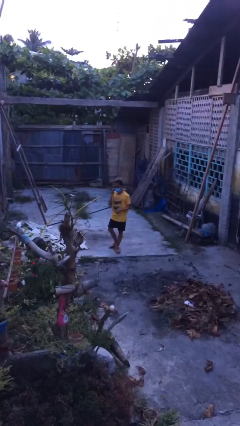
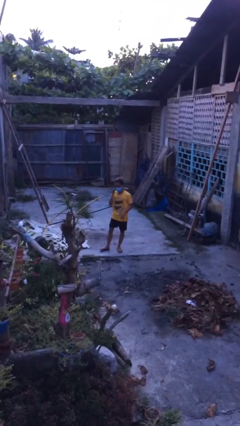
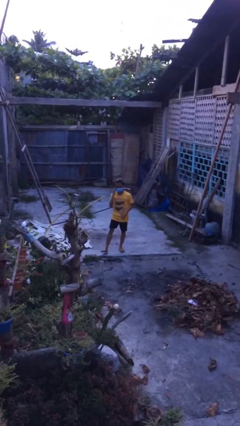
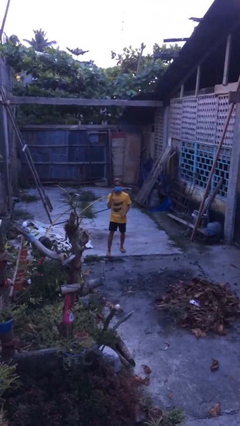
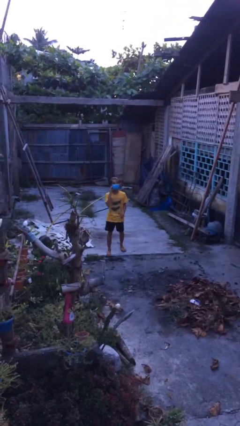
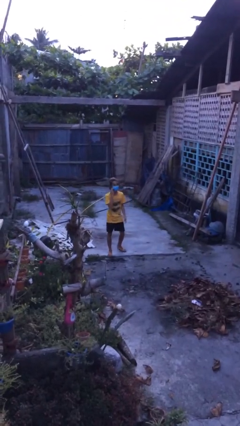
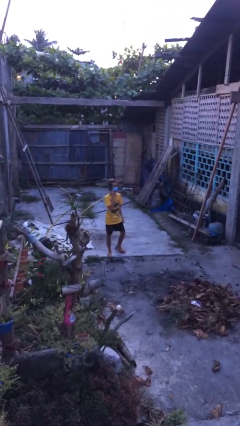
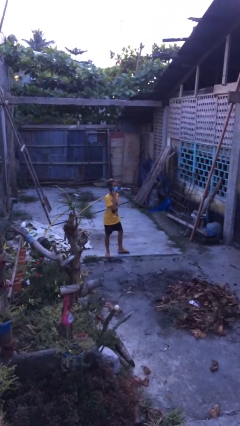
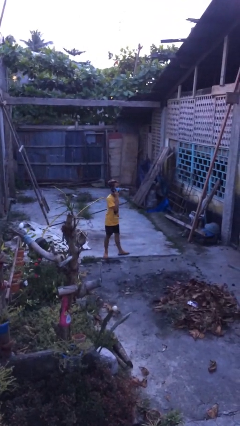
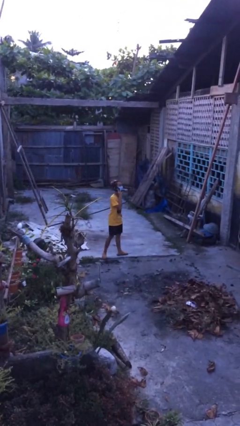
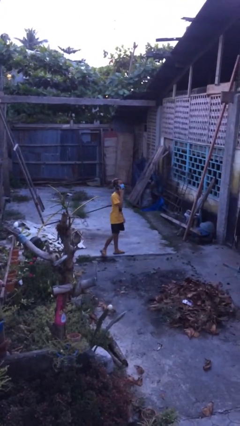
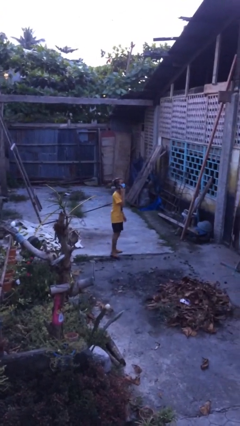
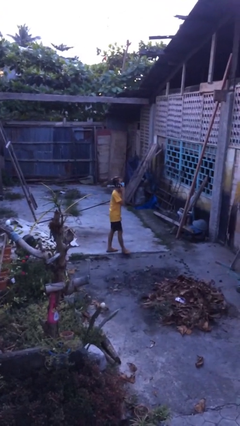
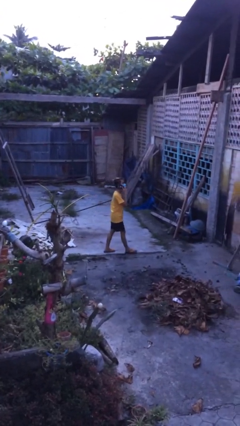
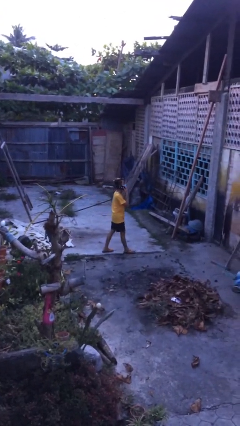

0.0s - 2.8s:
person talks on phone

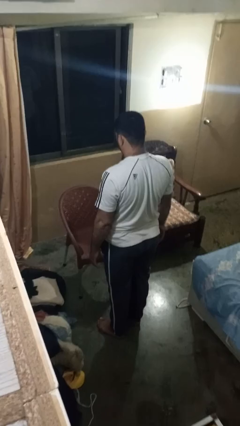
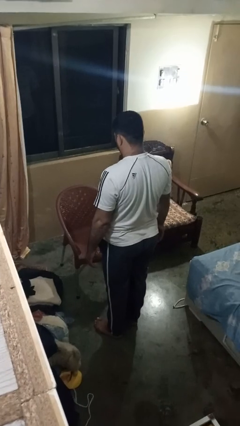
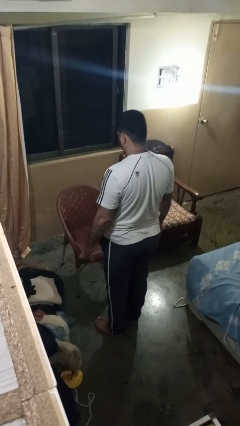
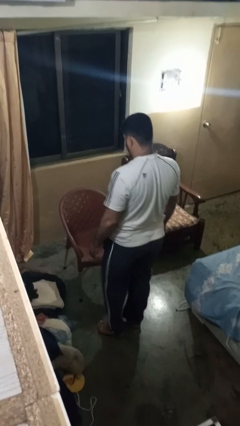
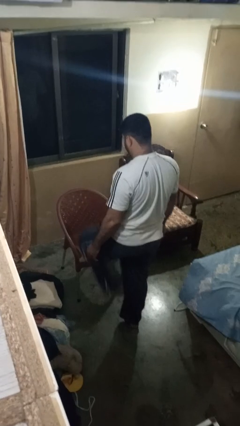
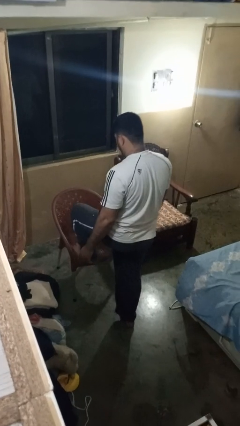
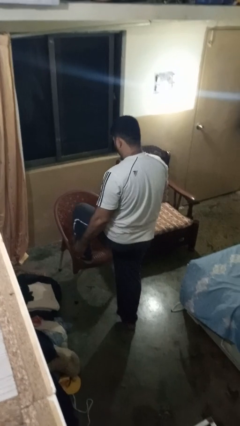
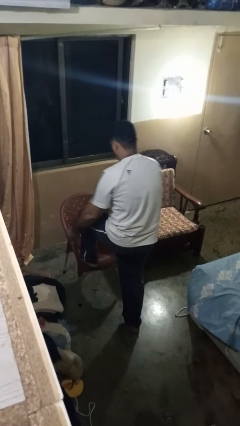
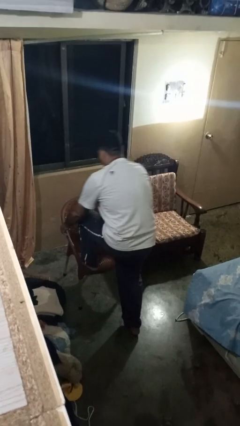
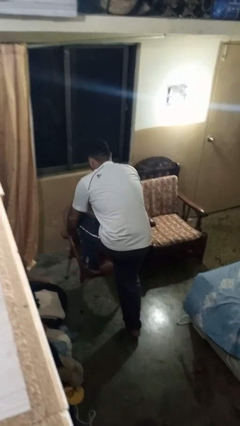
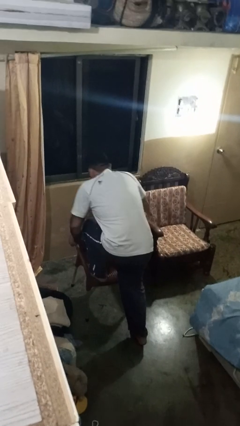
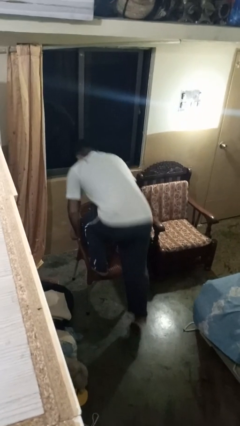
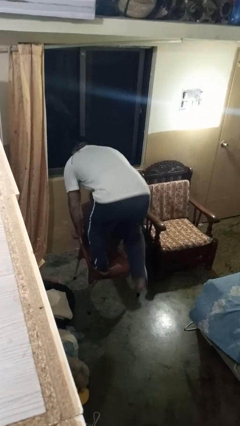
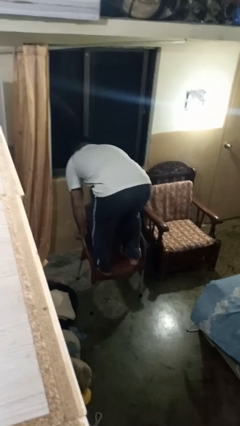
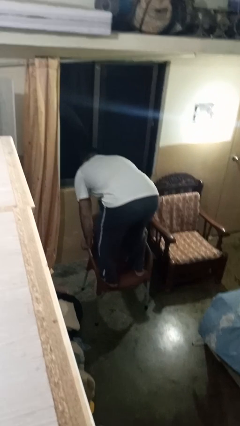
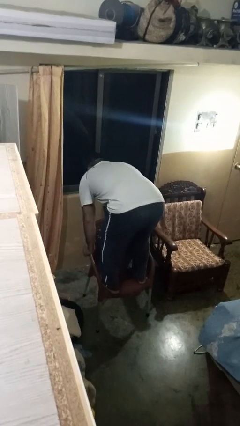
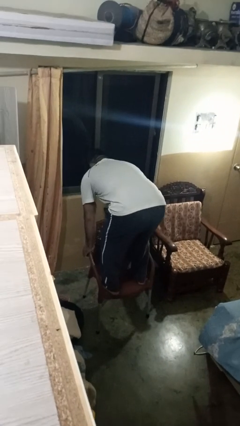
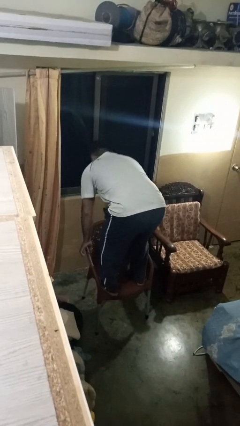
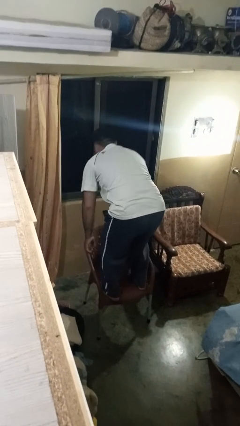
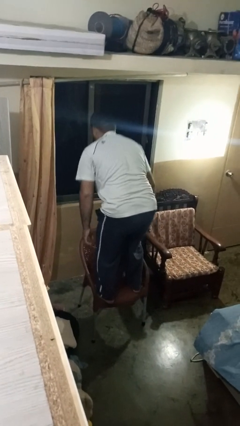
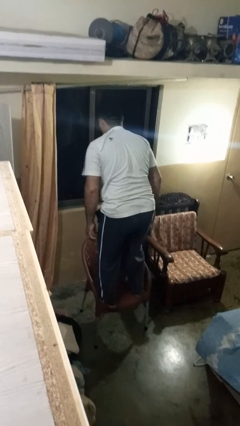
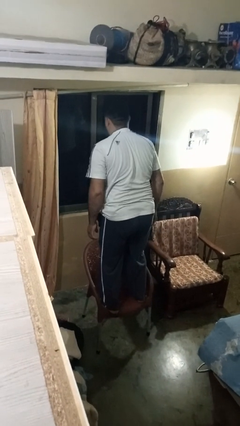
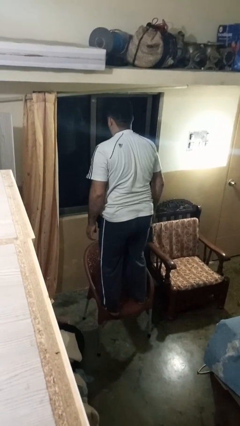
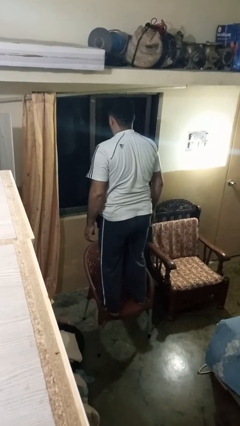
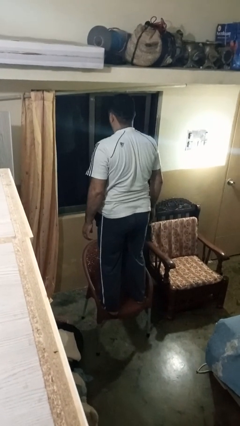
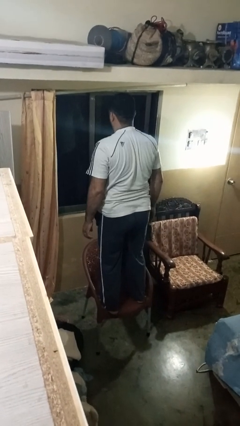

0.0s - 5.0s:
person climbs on chair

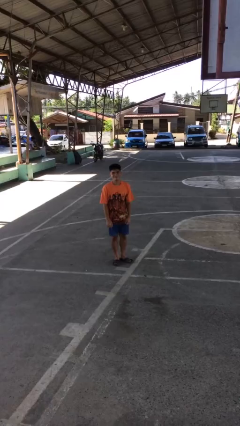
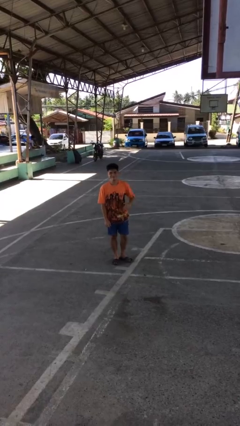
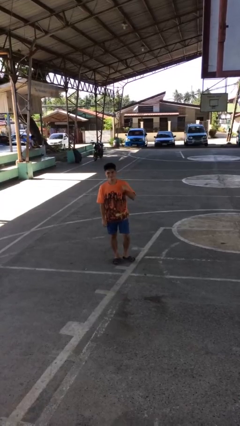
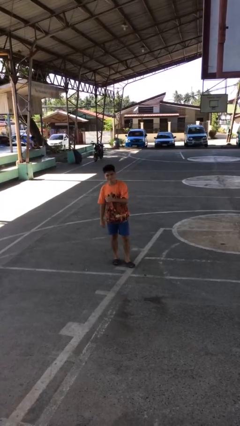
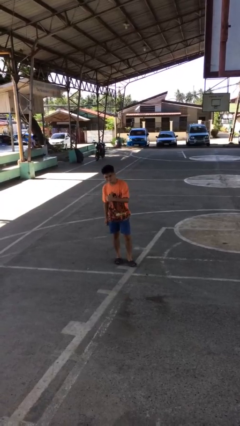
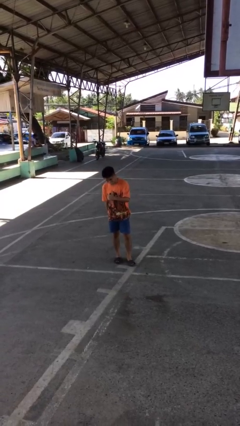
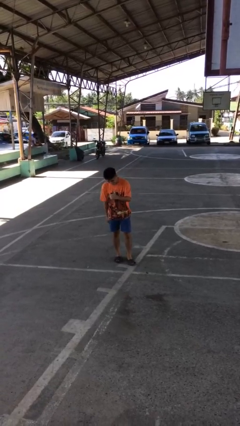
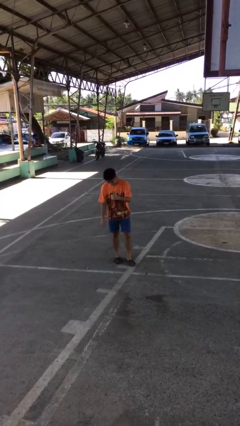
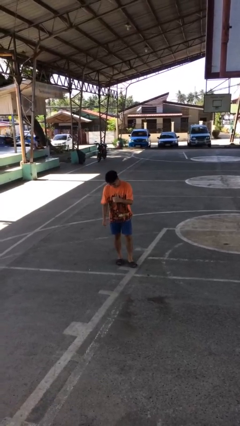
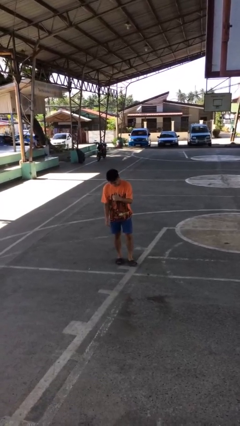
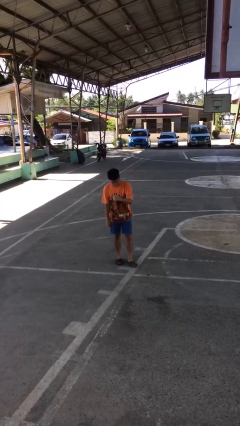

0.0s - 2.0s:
person gestures thumbs up

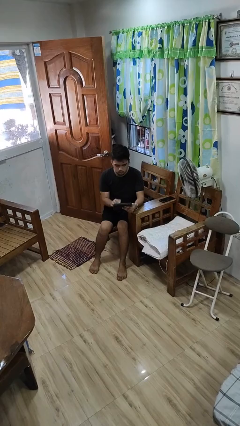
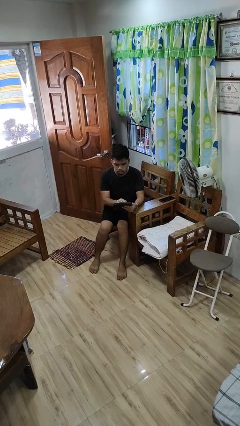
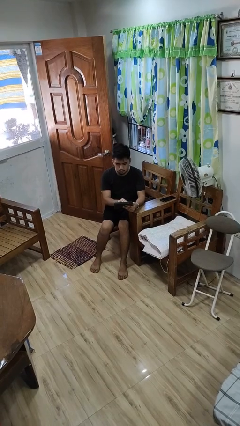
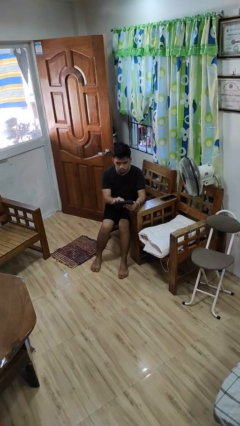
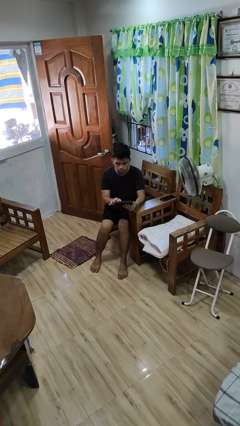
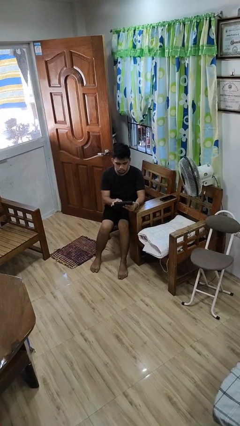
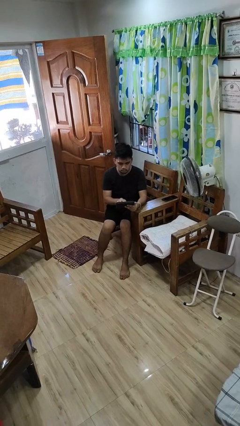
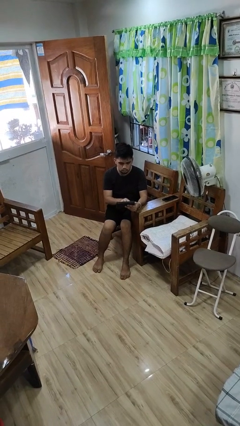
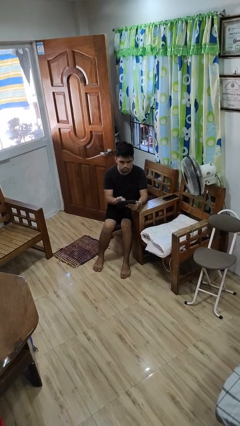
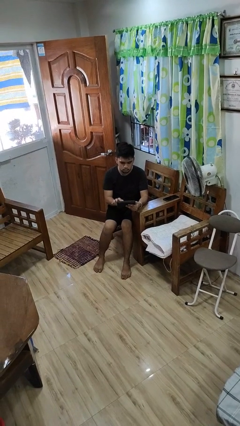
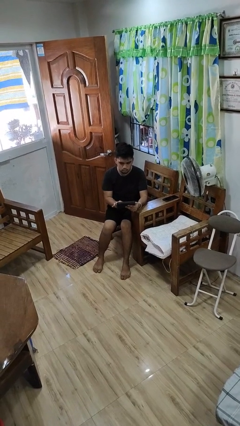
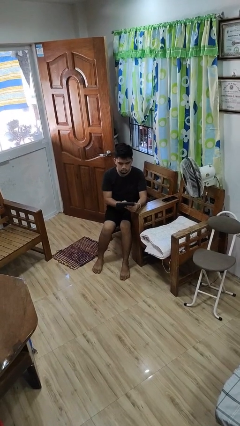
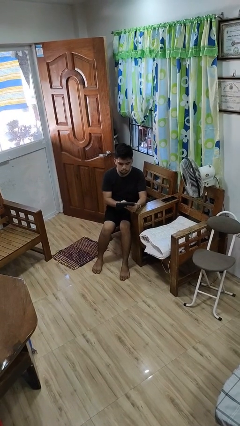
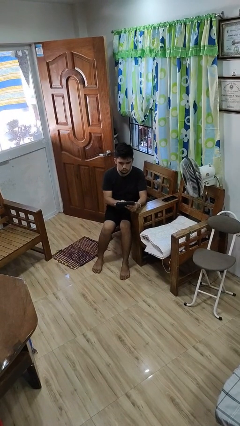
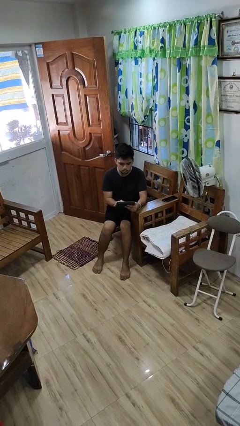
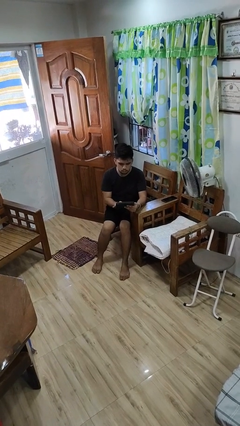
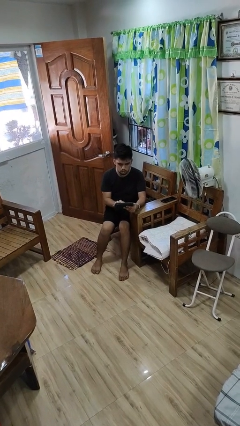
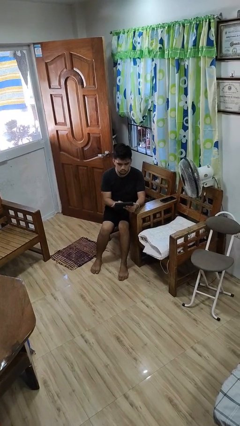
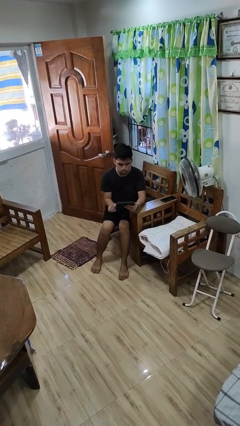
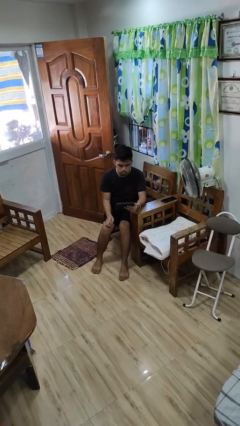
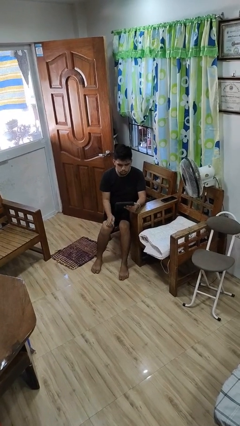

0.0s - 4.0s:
person interacts with tablet

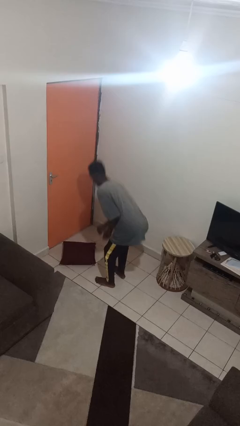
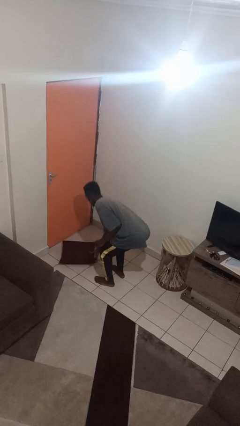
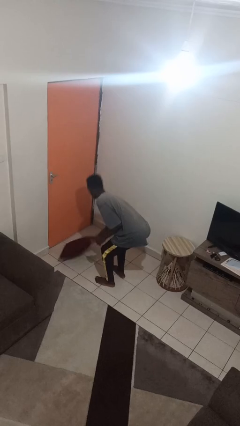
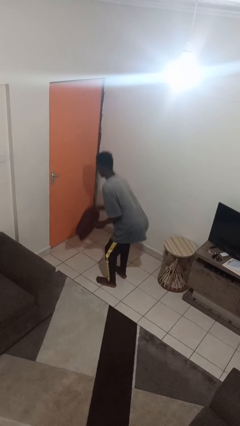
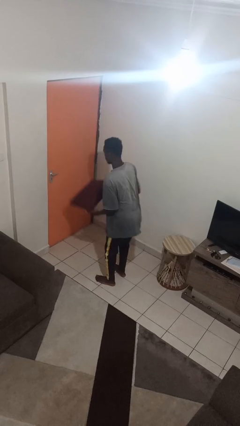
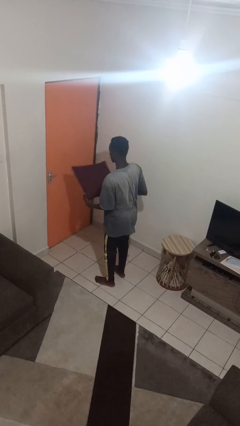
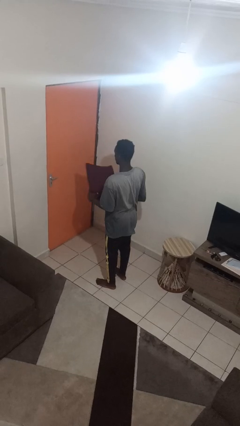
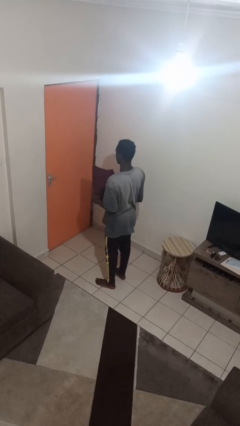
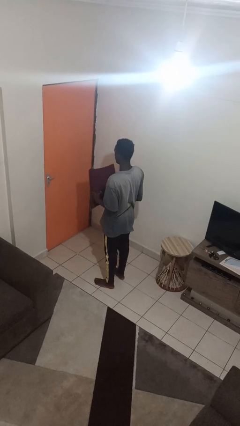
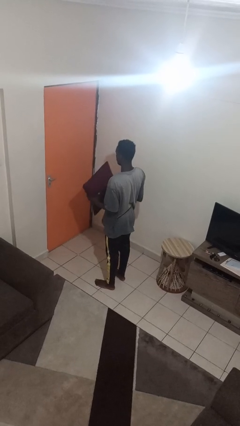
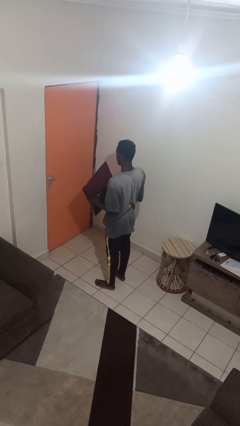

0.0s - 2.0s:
person picks up object from floor

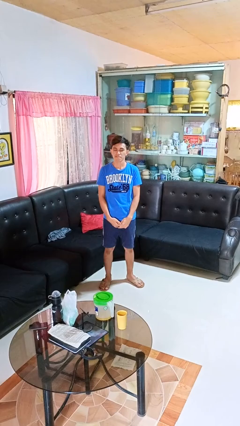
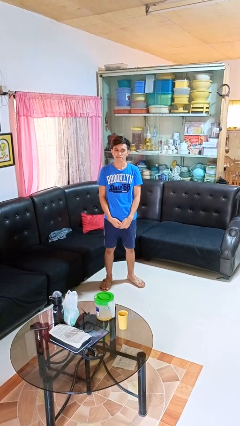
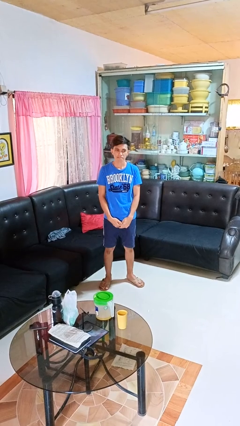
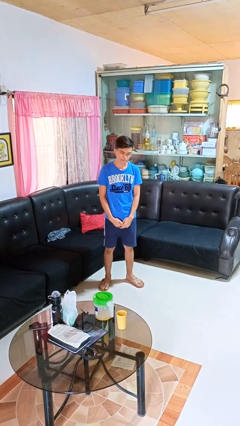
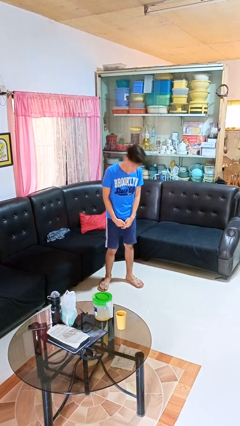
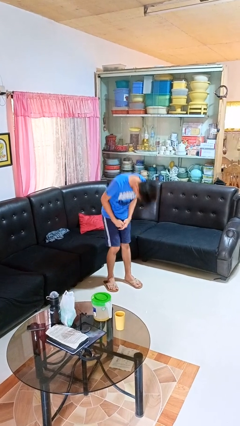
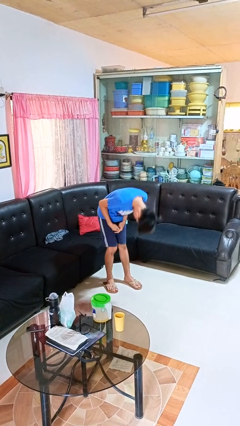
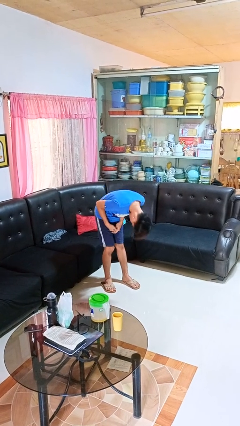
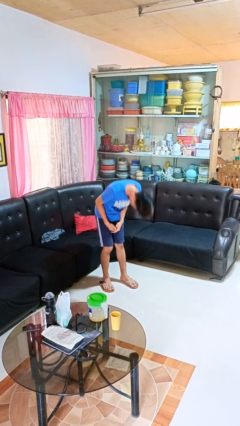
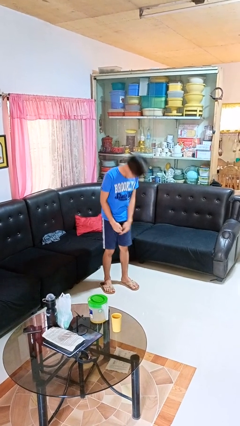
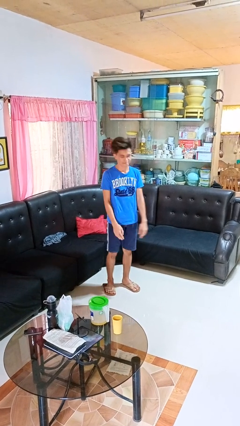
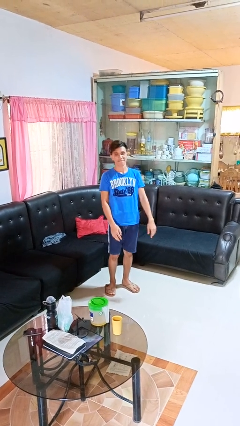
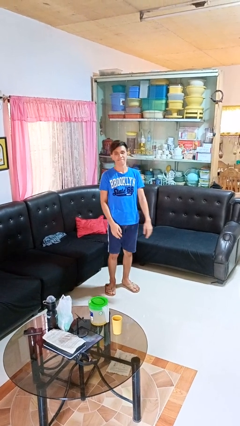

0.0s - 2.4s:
person bows
